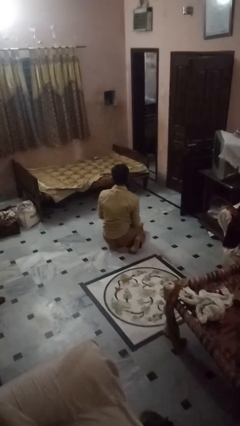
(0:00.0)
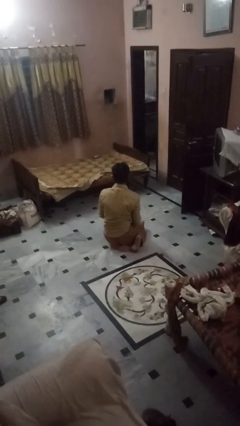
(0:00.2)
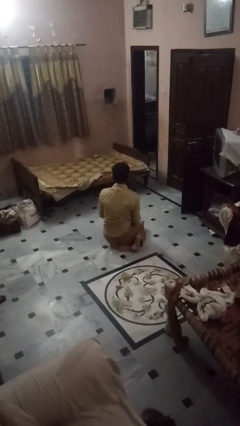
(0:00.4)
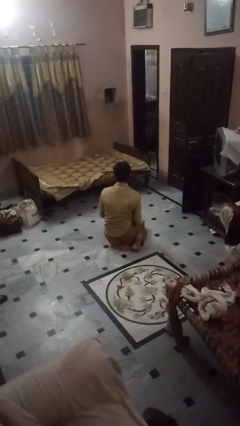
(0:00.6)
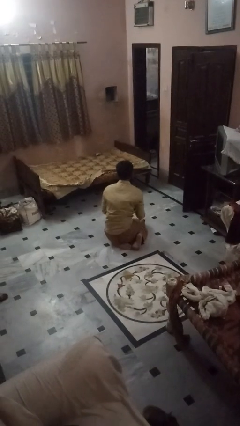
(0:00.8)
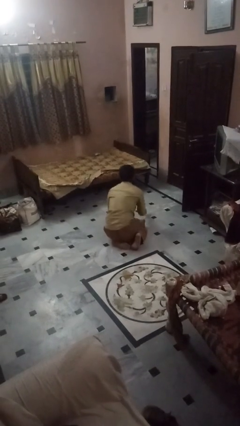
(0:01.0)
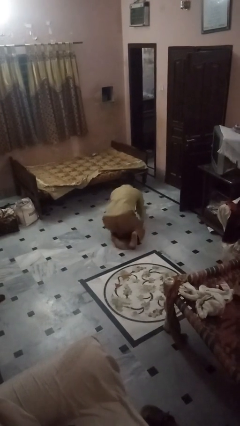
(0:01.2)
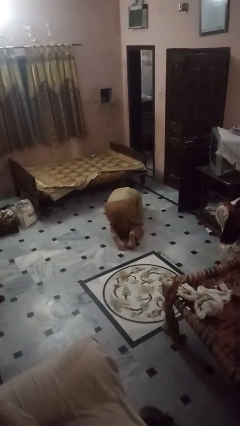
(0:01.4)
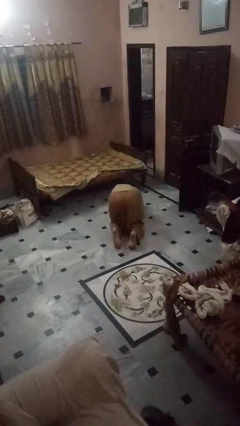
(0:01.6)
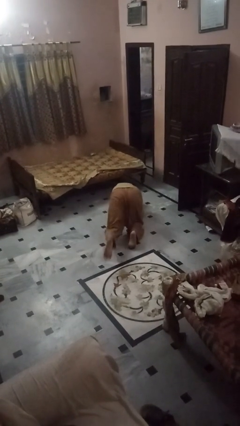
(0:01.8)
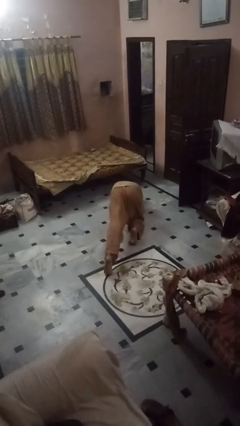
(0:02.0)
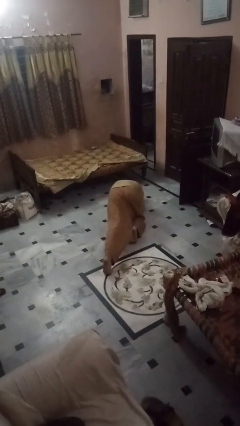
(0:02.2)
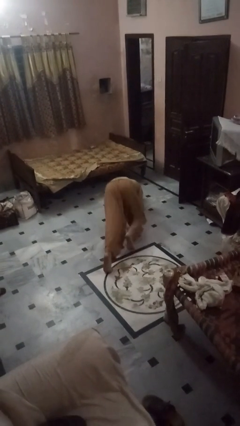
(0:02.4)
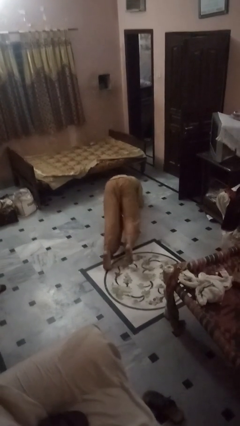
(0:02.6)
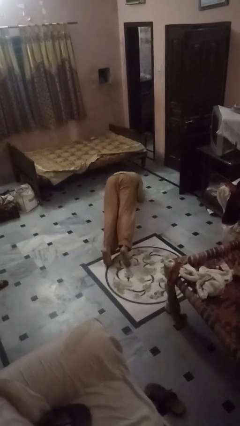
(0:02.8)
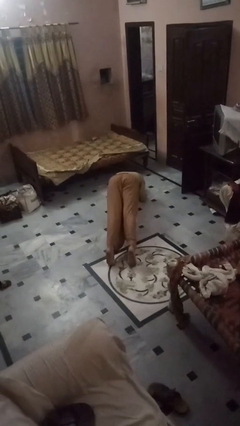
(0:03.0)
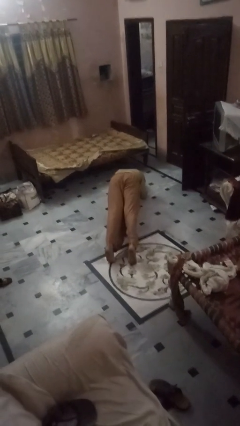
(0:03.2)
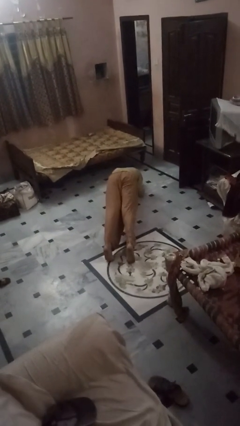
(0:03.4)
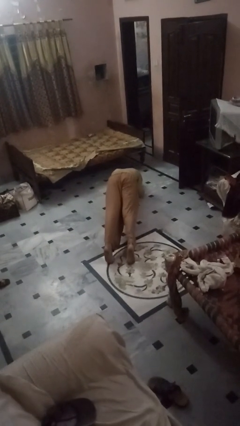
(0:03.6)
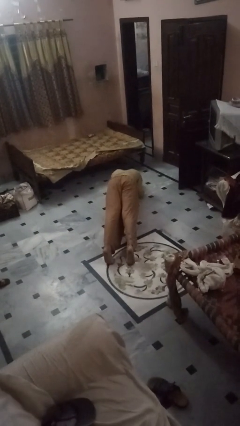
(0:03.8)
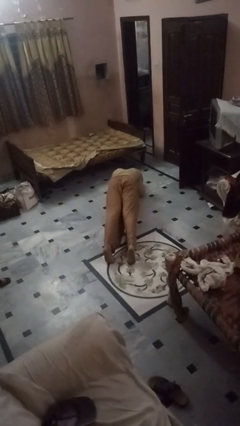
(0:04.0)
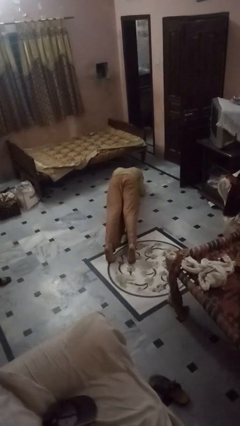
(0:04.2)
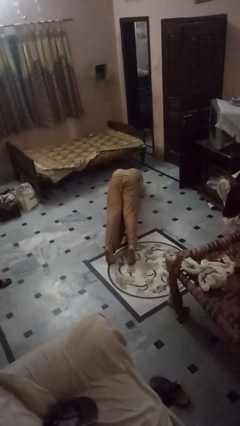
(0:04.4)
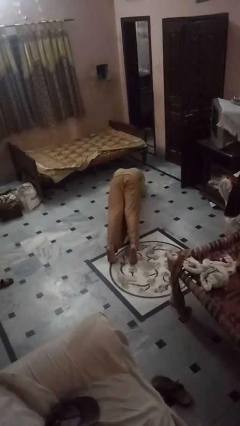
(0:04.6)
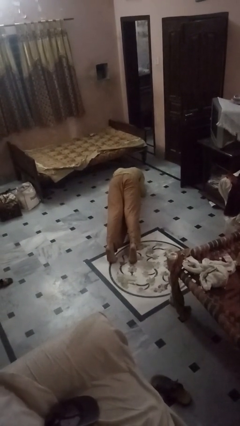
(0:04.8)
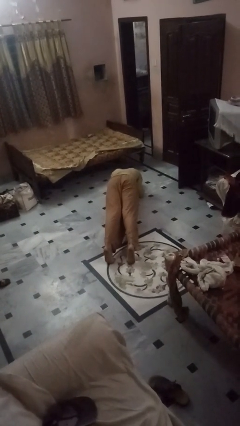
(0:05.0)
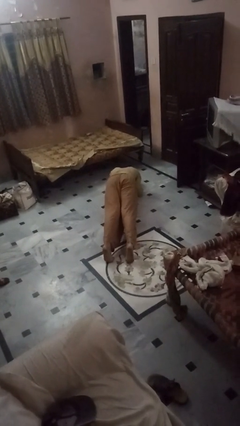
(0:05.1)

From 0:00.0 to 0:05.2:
person exercises with plank

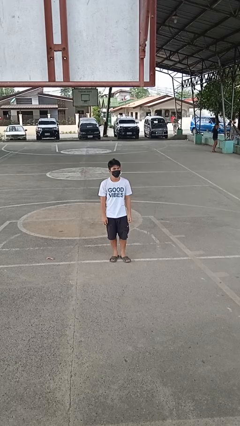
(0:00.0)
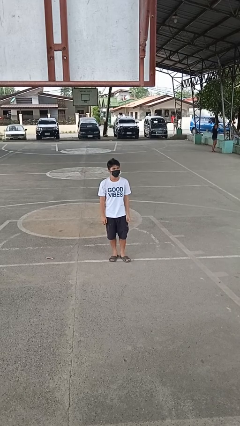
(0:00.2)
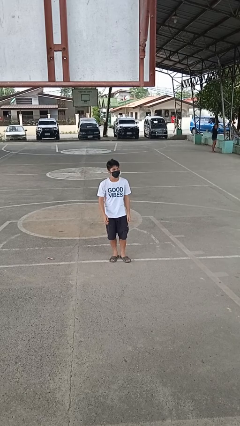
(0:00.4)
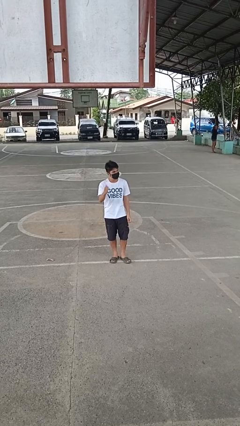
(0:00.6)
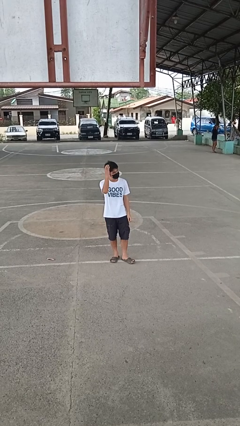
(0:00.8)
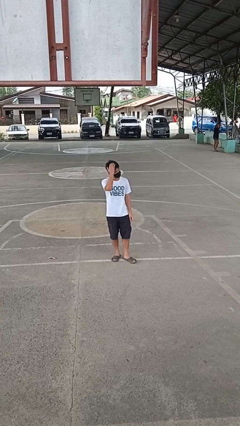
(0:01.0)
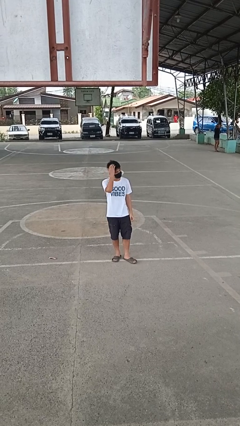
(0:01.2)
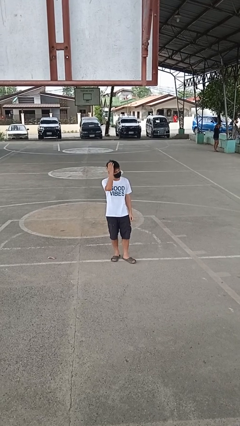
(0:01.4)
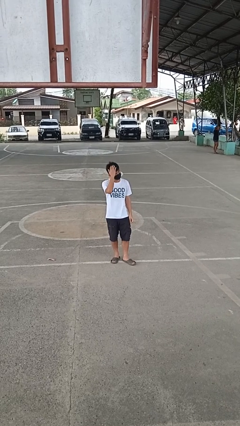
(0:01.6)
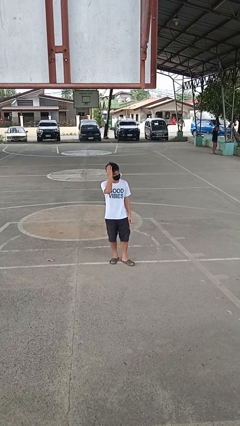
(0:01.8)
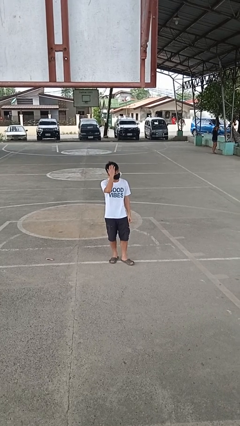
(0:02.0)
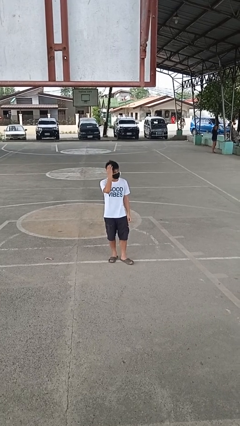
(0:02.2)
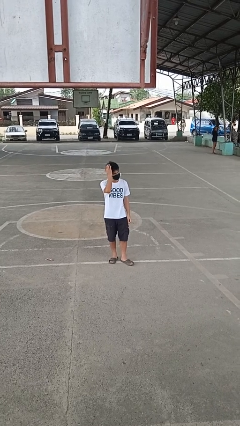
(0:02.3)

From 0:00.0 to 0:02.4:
person pats head

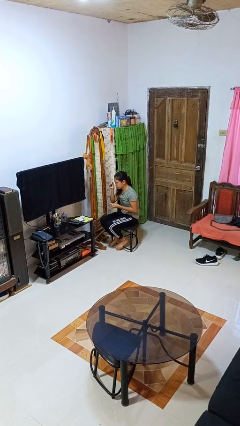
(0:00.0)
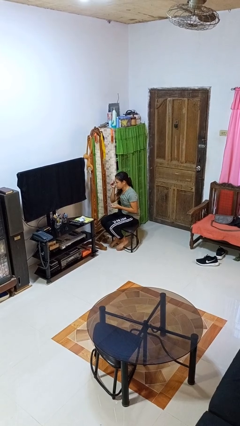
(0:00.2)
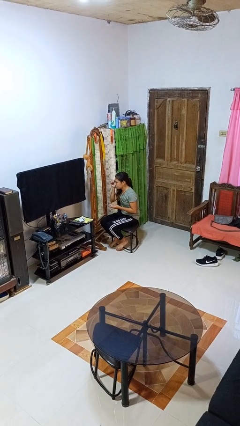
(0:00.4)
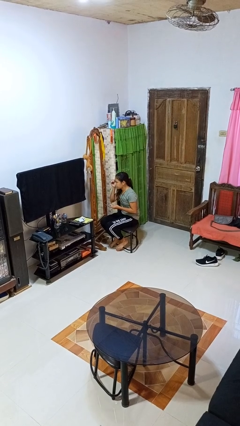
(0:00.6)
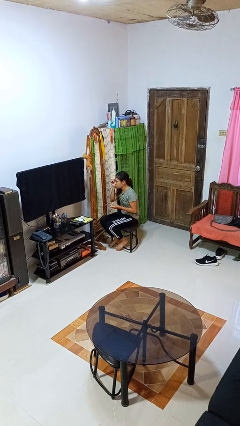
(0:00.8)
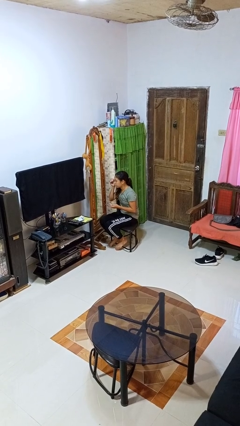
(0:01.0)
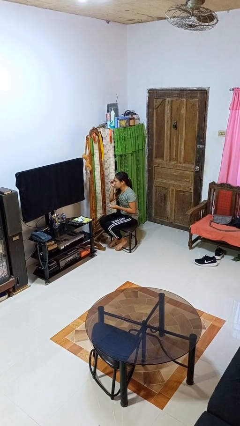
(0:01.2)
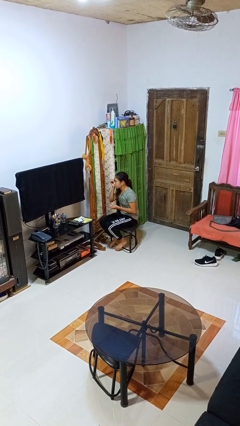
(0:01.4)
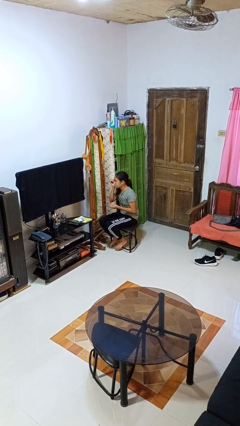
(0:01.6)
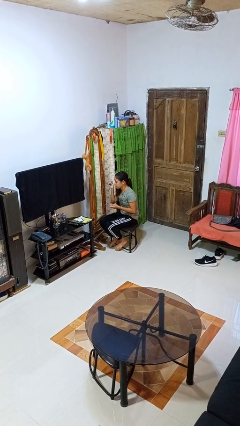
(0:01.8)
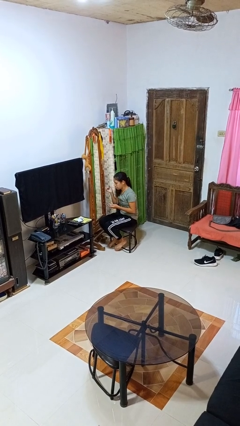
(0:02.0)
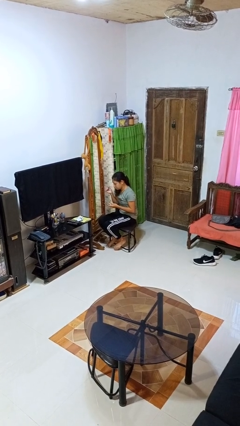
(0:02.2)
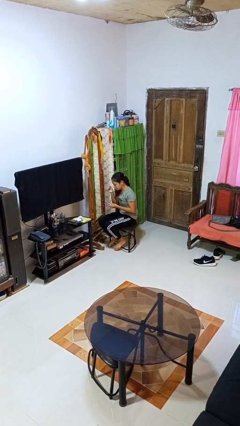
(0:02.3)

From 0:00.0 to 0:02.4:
person applies eye makeup

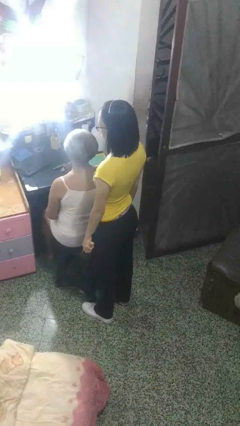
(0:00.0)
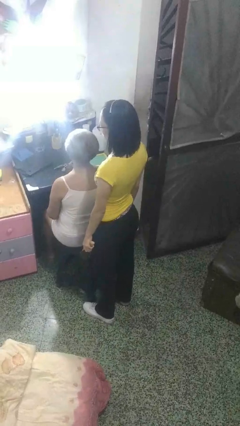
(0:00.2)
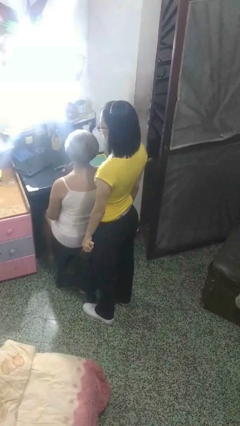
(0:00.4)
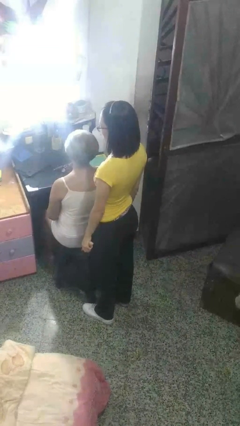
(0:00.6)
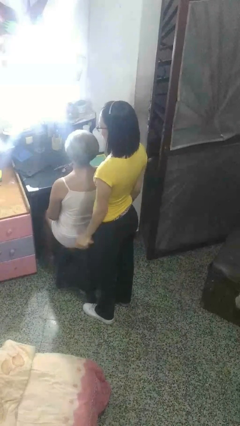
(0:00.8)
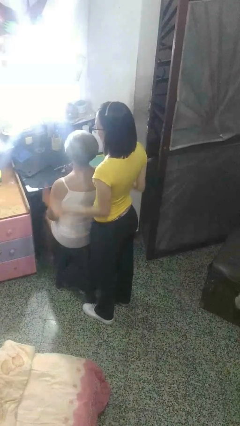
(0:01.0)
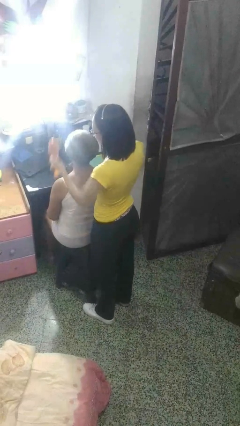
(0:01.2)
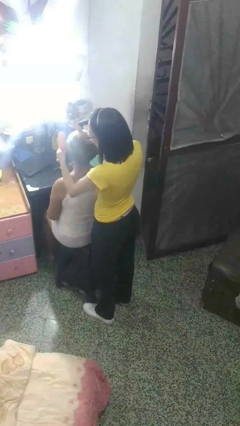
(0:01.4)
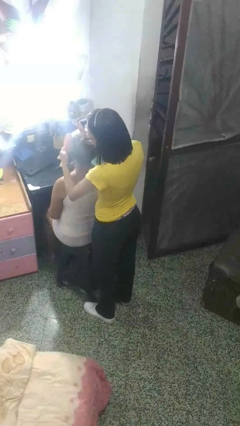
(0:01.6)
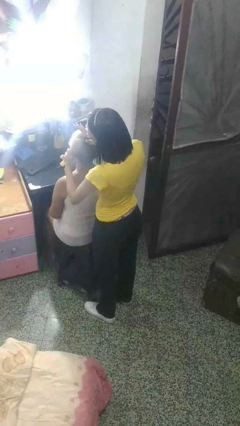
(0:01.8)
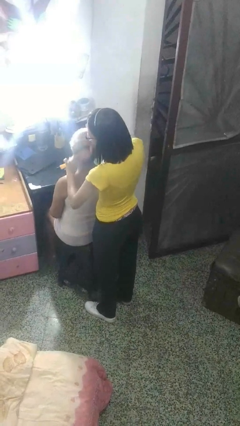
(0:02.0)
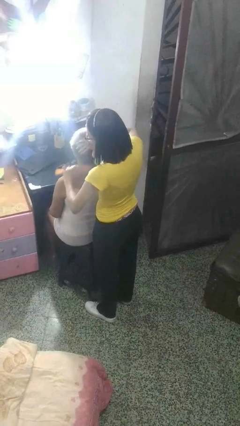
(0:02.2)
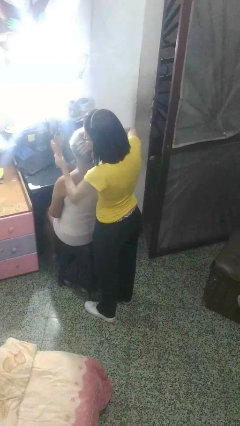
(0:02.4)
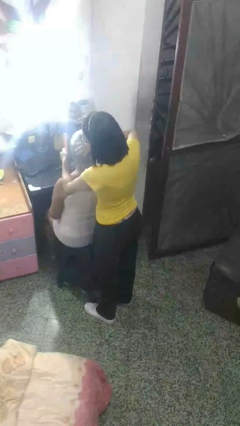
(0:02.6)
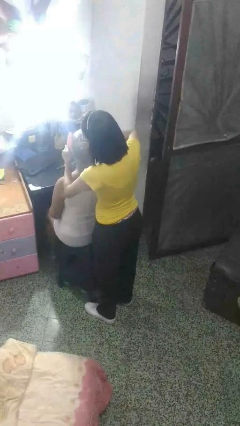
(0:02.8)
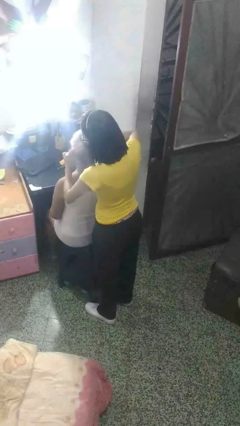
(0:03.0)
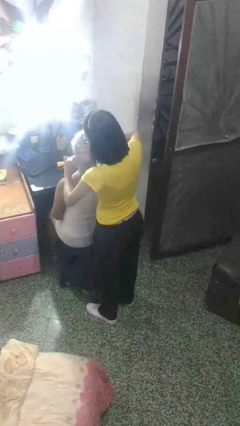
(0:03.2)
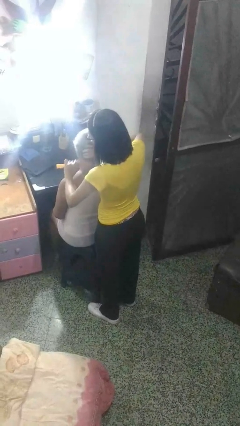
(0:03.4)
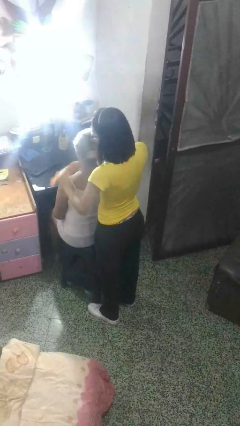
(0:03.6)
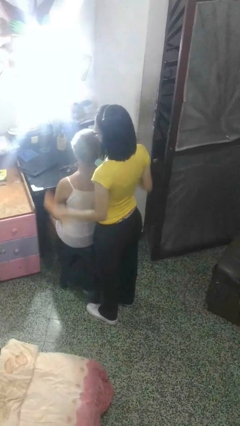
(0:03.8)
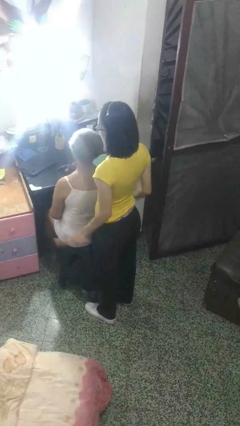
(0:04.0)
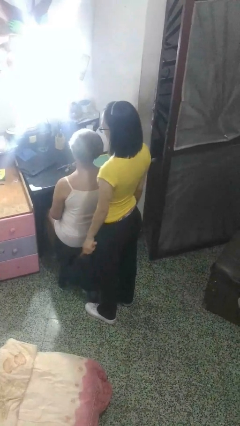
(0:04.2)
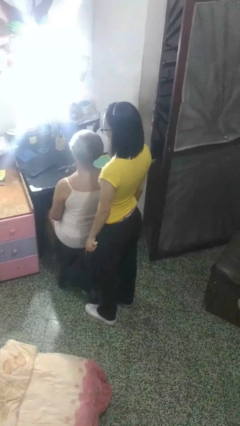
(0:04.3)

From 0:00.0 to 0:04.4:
person brushes hair of person

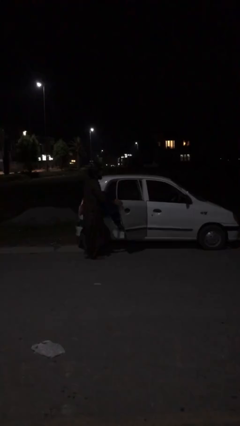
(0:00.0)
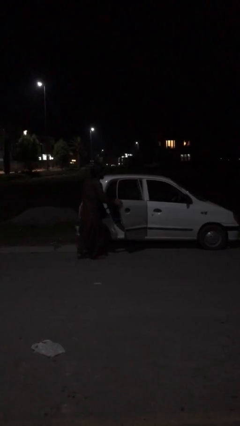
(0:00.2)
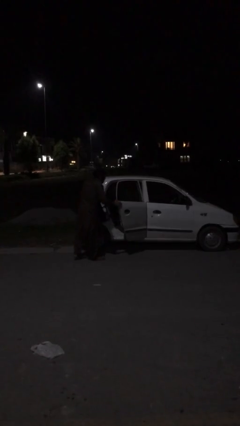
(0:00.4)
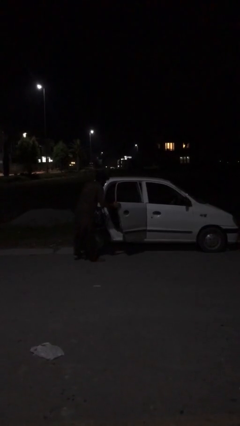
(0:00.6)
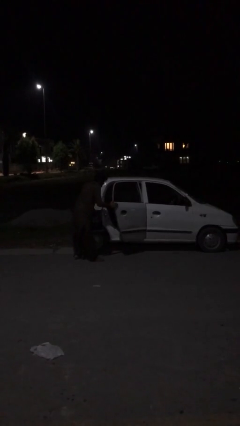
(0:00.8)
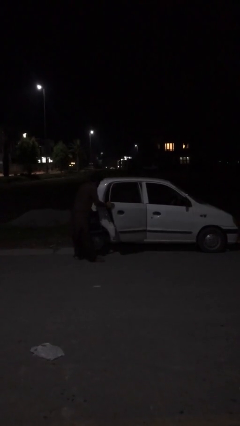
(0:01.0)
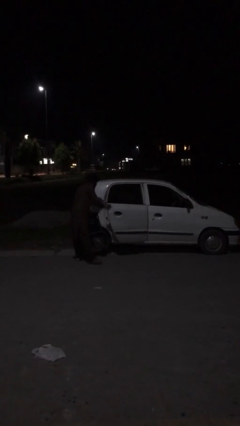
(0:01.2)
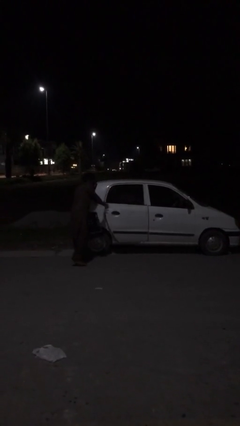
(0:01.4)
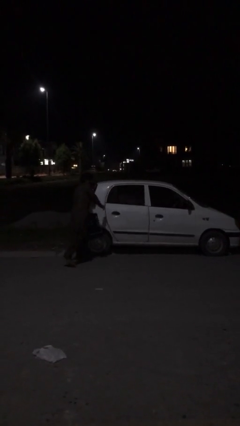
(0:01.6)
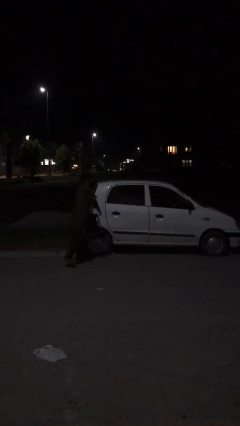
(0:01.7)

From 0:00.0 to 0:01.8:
person unloads car

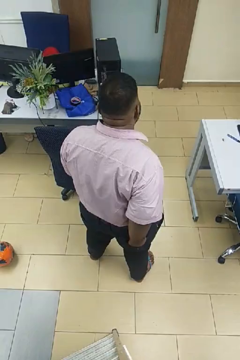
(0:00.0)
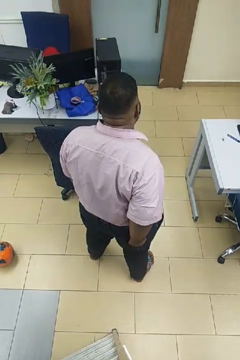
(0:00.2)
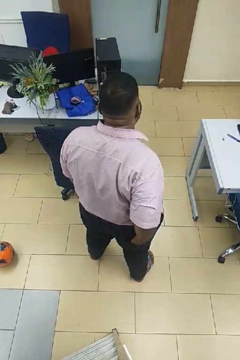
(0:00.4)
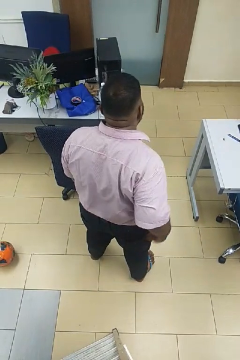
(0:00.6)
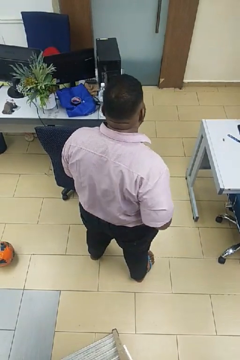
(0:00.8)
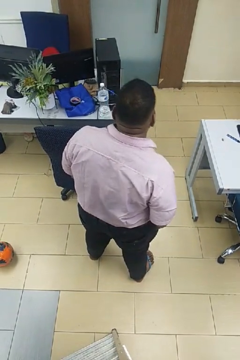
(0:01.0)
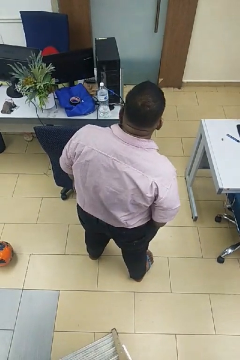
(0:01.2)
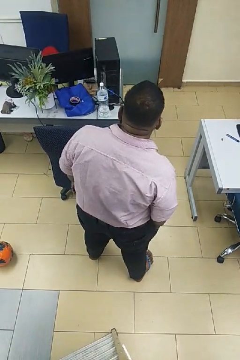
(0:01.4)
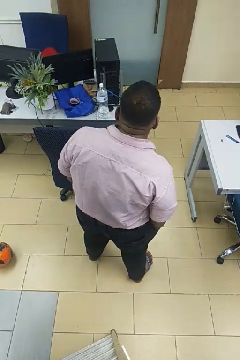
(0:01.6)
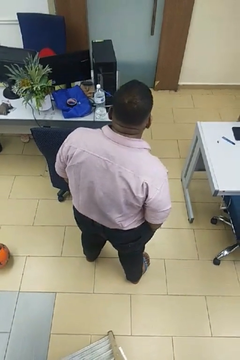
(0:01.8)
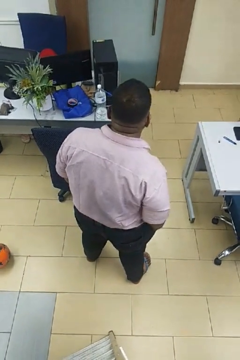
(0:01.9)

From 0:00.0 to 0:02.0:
person puts hands in back pockets
